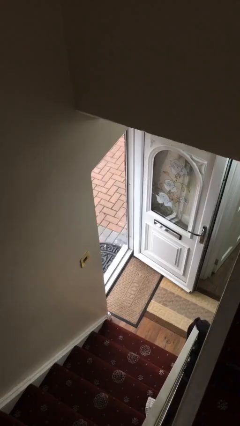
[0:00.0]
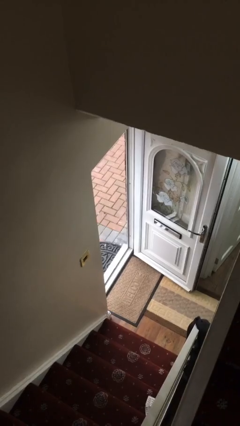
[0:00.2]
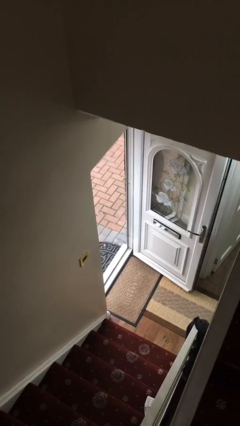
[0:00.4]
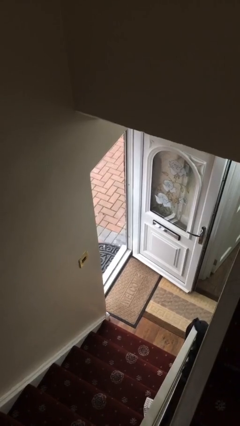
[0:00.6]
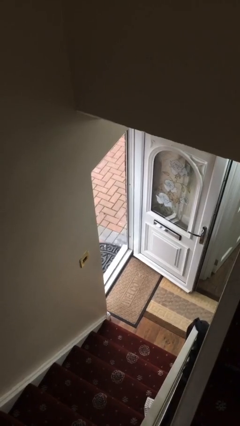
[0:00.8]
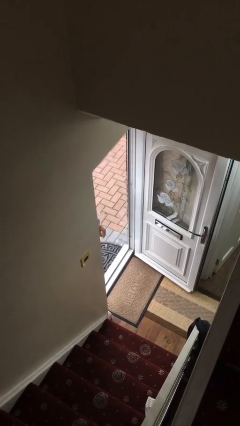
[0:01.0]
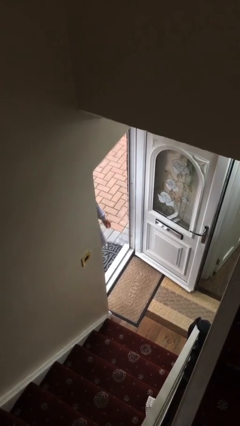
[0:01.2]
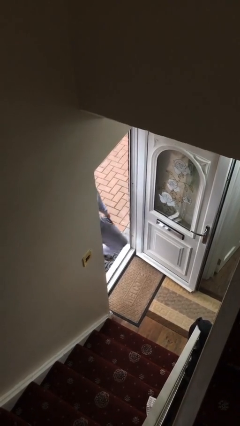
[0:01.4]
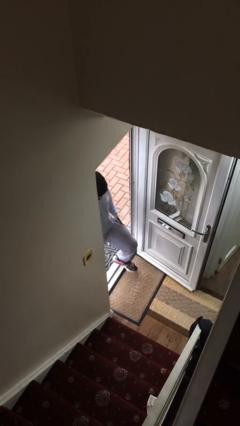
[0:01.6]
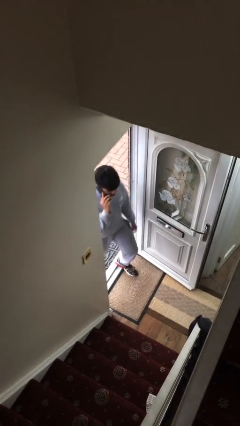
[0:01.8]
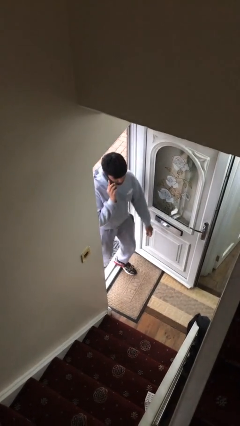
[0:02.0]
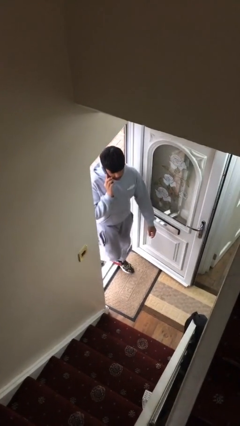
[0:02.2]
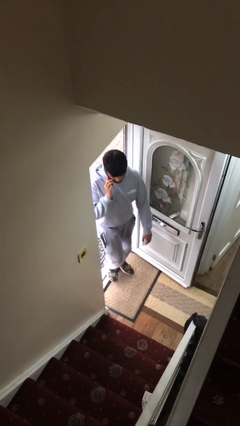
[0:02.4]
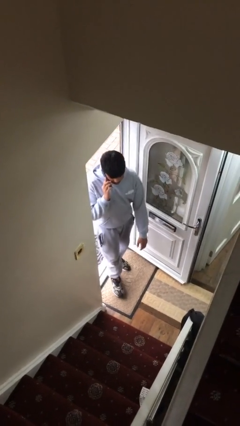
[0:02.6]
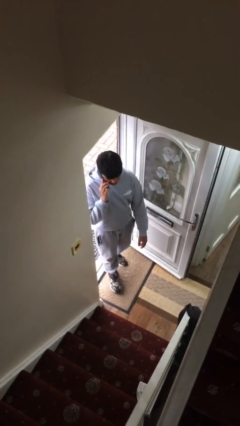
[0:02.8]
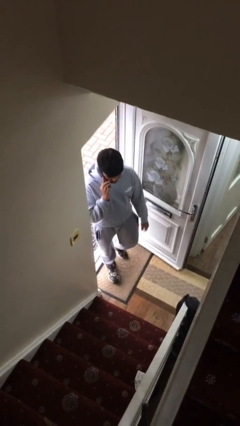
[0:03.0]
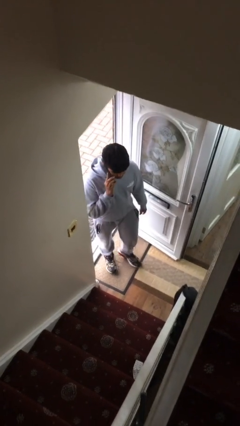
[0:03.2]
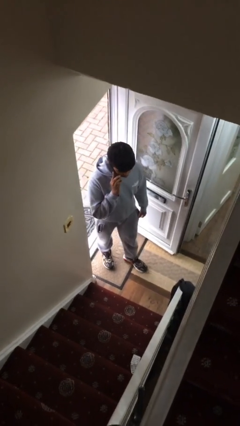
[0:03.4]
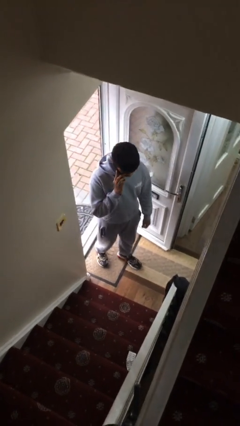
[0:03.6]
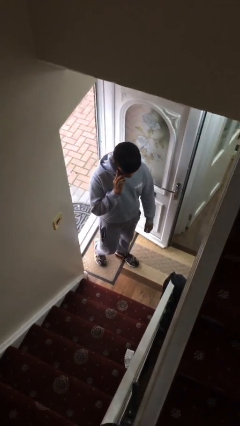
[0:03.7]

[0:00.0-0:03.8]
person enters scene through structure

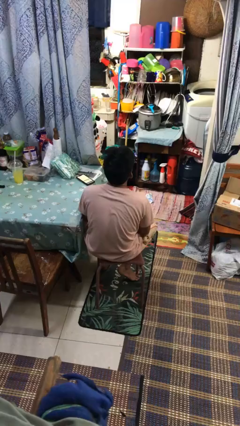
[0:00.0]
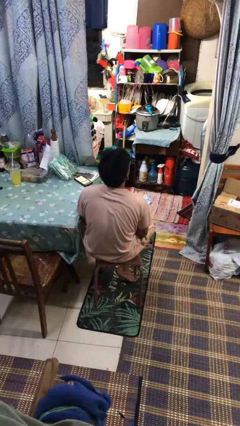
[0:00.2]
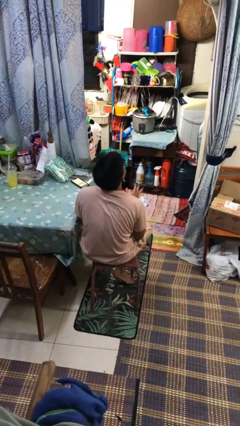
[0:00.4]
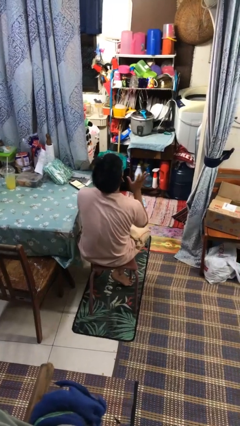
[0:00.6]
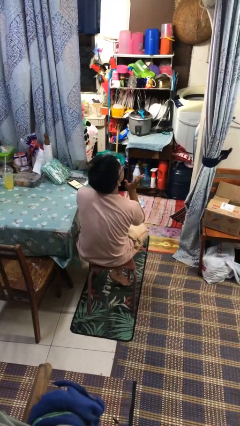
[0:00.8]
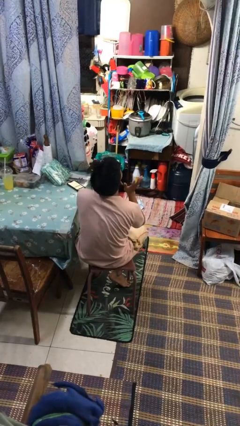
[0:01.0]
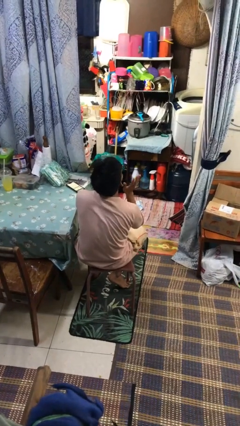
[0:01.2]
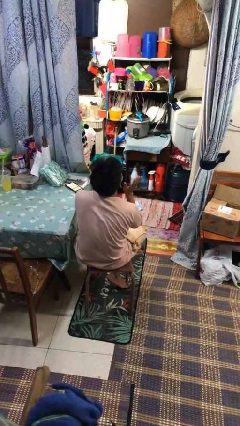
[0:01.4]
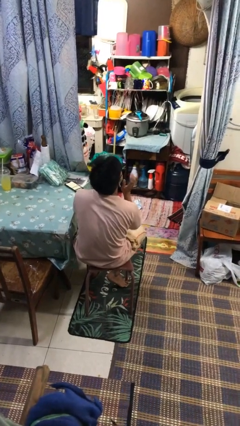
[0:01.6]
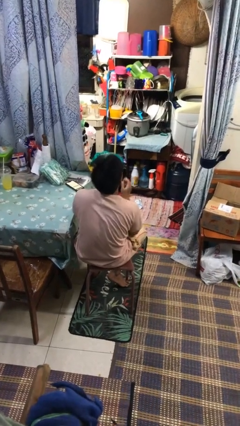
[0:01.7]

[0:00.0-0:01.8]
person sticks out tongue

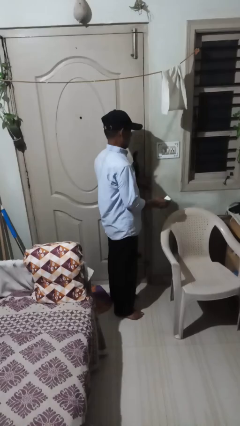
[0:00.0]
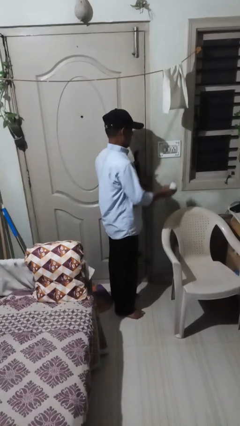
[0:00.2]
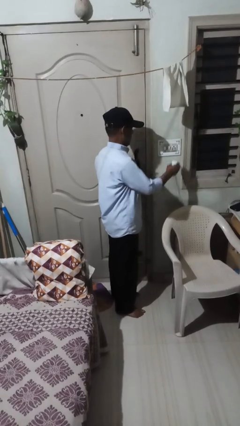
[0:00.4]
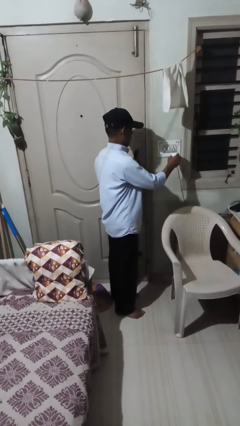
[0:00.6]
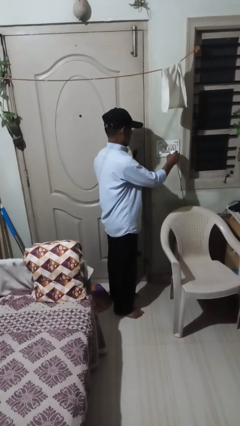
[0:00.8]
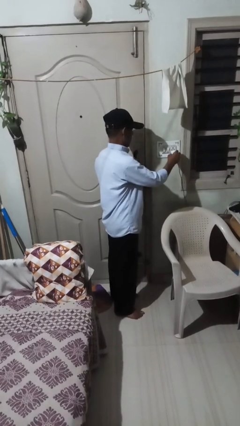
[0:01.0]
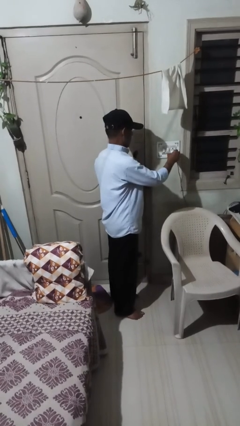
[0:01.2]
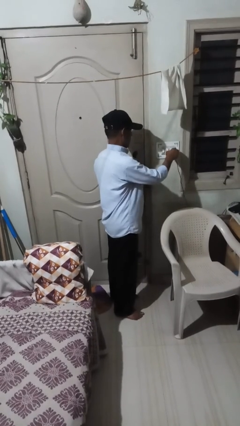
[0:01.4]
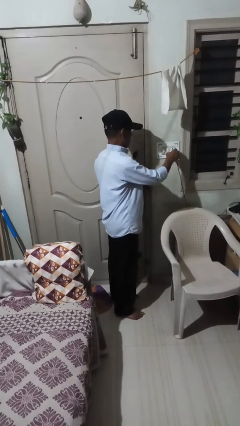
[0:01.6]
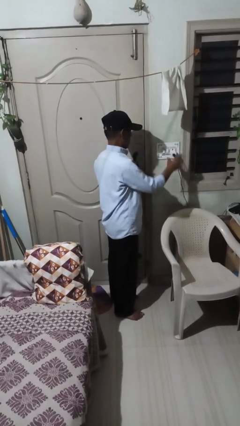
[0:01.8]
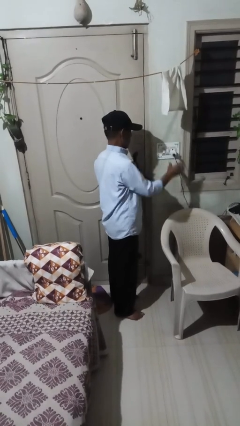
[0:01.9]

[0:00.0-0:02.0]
person plugs into electrical socket

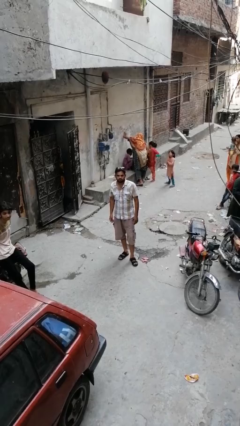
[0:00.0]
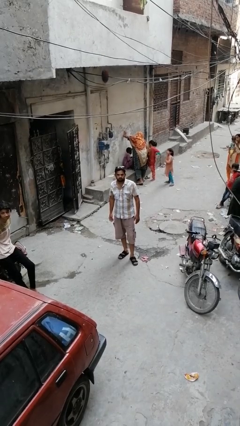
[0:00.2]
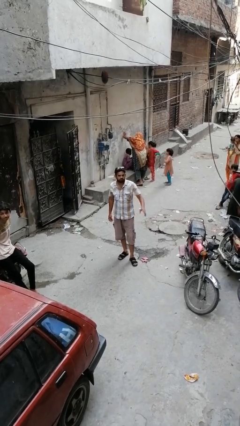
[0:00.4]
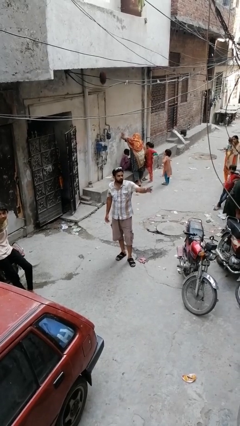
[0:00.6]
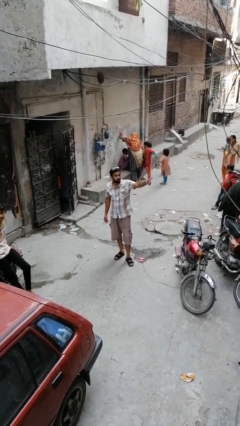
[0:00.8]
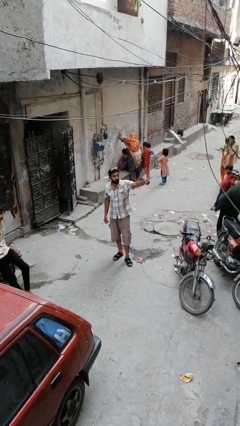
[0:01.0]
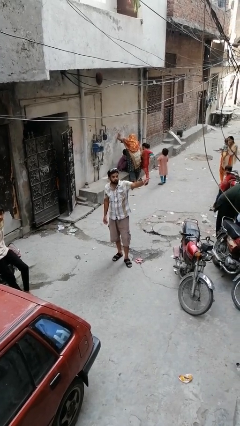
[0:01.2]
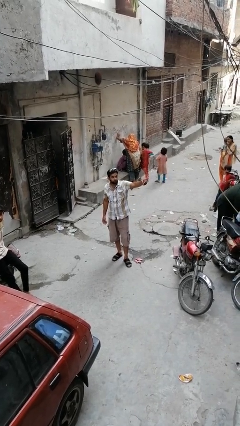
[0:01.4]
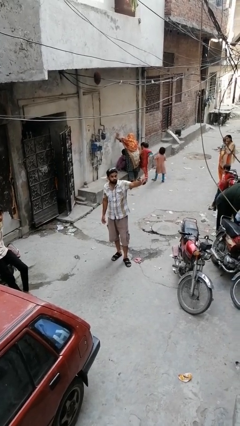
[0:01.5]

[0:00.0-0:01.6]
person points at person

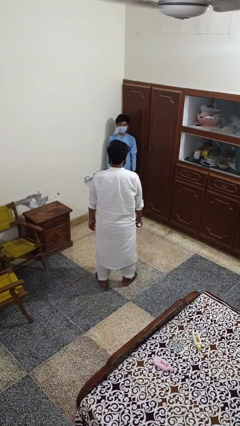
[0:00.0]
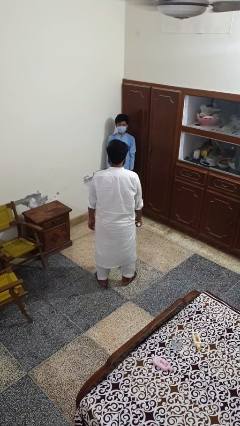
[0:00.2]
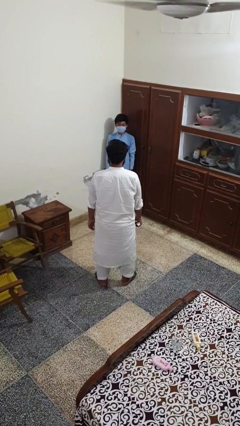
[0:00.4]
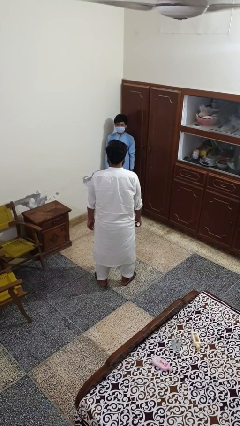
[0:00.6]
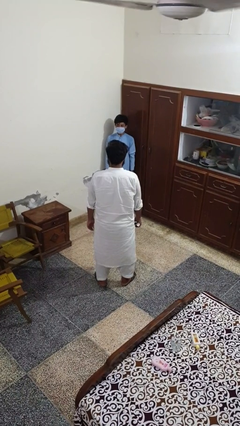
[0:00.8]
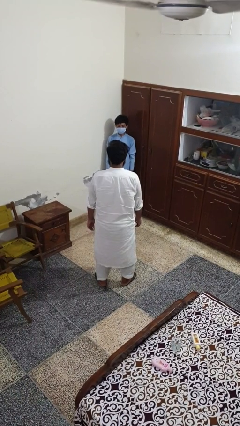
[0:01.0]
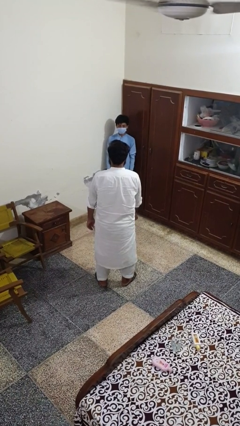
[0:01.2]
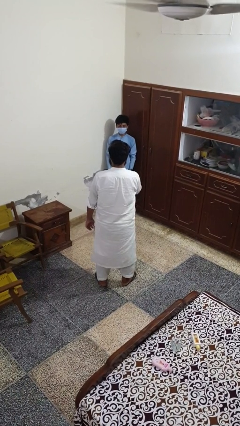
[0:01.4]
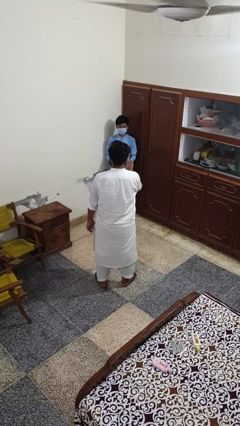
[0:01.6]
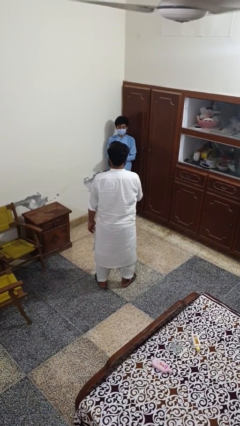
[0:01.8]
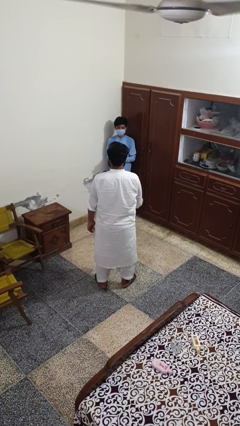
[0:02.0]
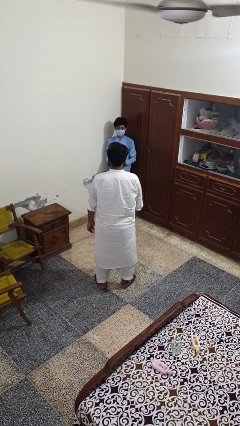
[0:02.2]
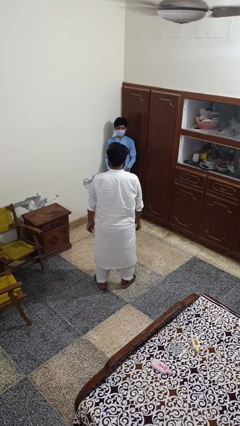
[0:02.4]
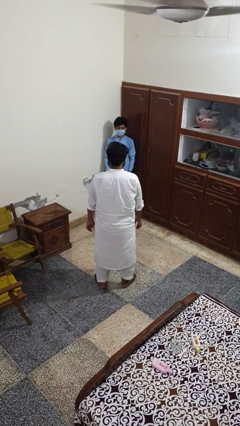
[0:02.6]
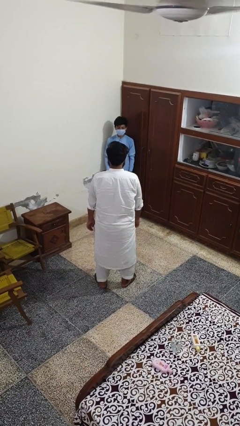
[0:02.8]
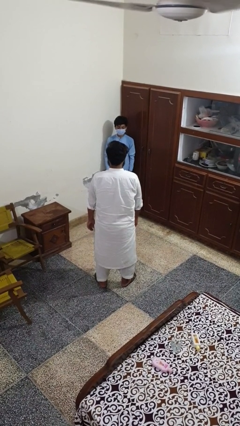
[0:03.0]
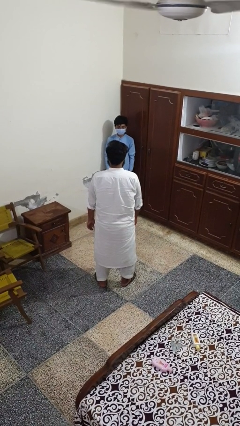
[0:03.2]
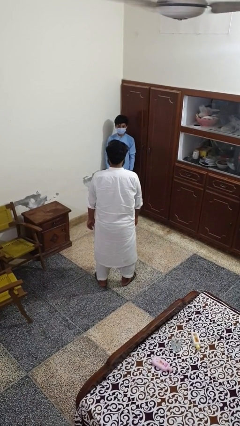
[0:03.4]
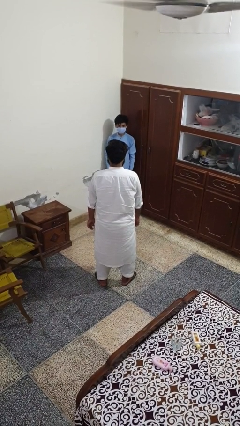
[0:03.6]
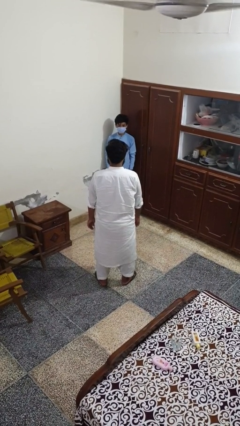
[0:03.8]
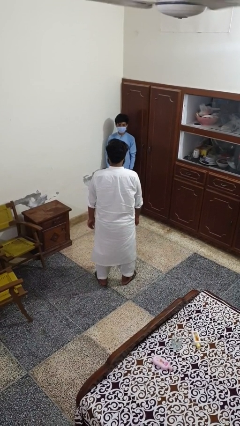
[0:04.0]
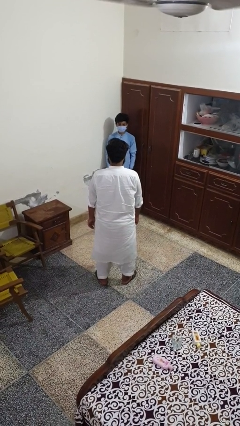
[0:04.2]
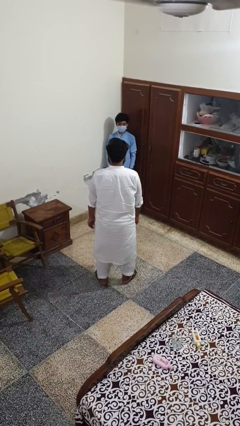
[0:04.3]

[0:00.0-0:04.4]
person throws object to person

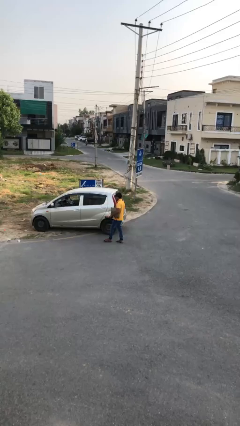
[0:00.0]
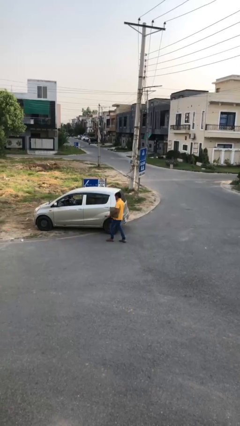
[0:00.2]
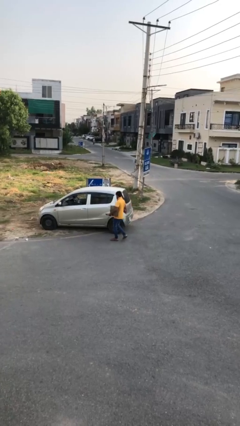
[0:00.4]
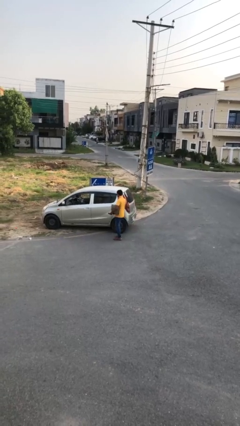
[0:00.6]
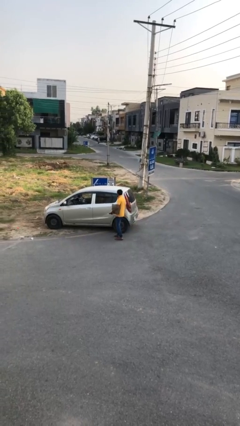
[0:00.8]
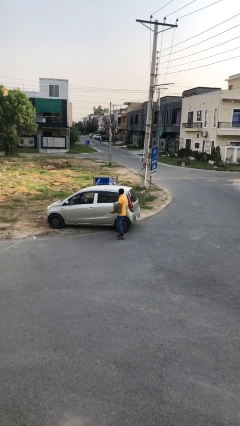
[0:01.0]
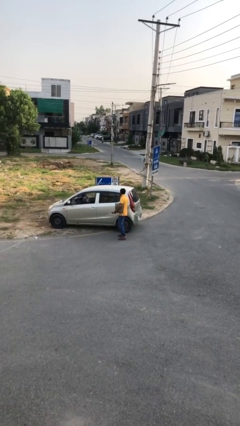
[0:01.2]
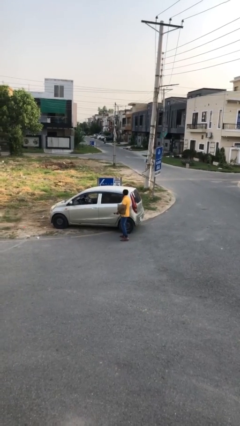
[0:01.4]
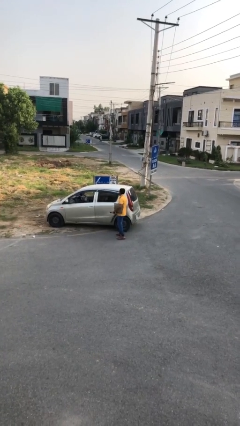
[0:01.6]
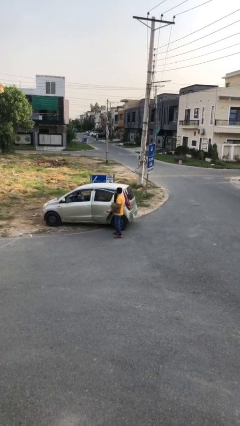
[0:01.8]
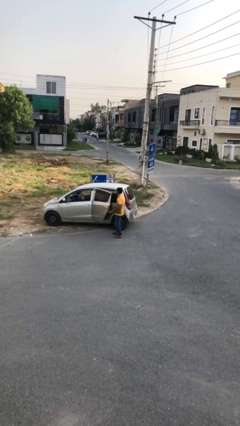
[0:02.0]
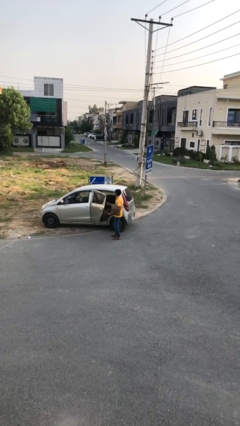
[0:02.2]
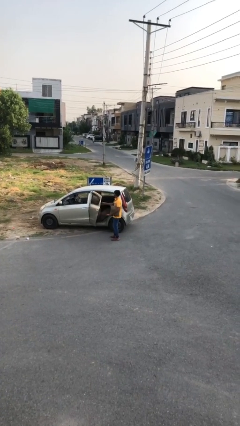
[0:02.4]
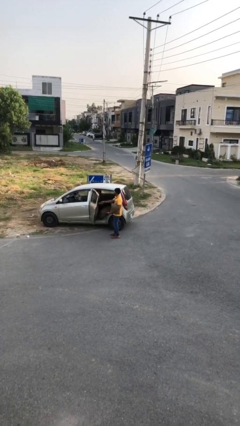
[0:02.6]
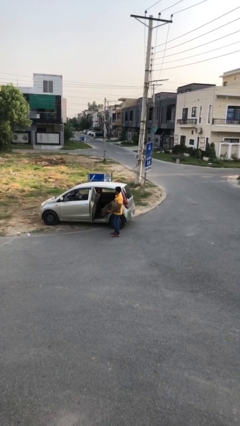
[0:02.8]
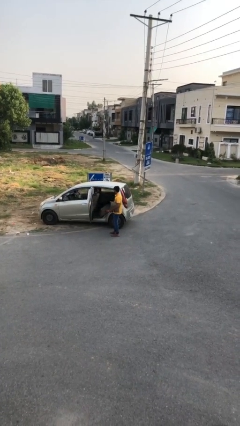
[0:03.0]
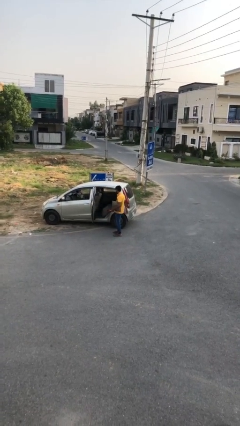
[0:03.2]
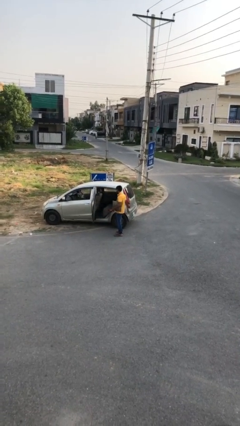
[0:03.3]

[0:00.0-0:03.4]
person opens car door

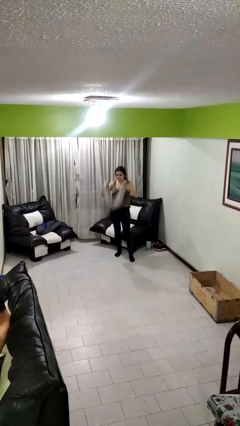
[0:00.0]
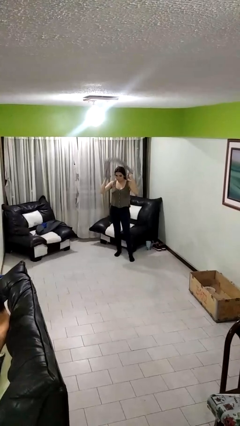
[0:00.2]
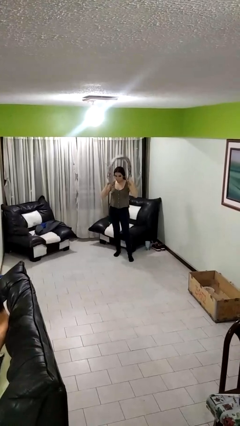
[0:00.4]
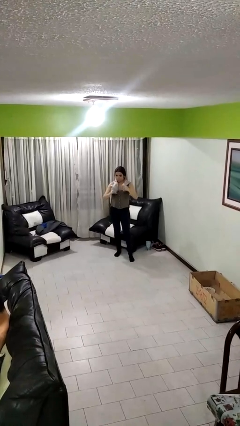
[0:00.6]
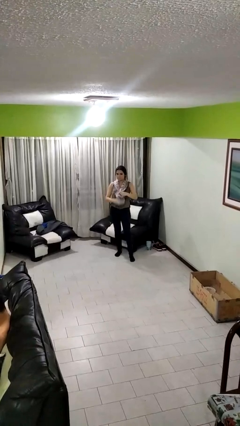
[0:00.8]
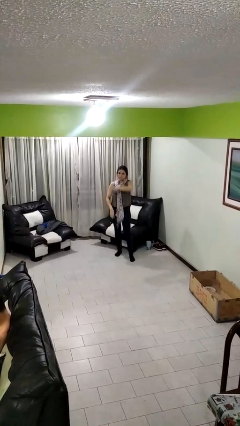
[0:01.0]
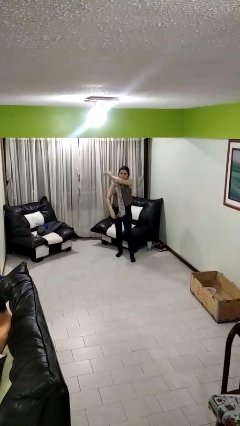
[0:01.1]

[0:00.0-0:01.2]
person puts on scarf
